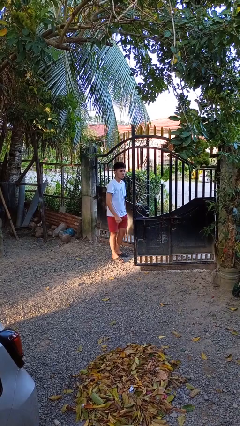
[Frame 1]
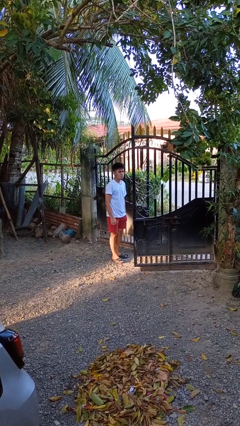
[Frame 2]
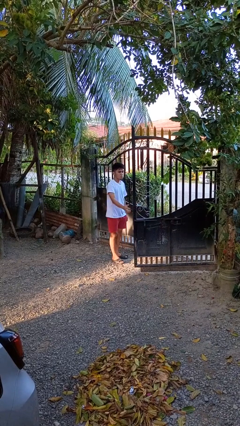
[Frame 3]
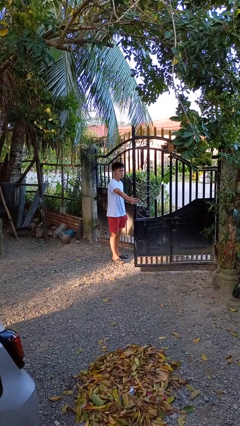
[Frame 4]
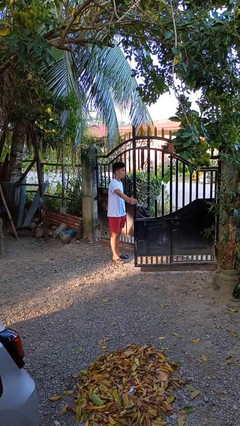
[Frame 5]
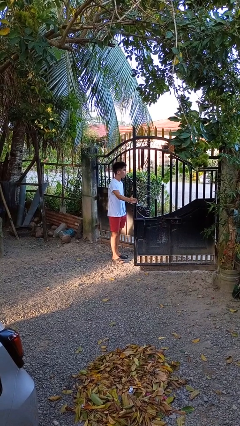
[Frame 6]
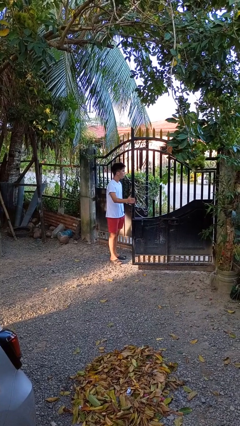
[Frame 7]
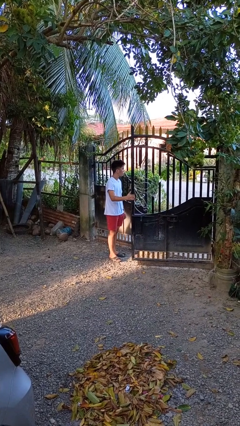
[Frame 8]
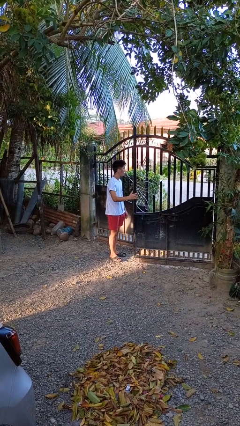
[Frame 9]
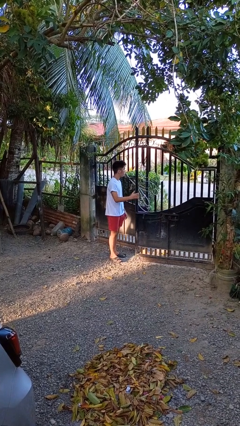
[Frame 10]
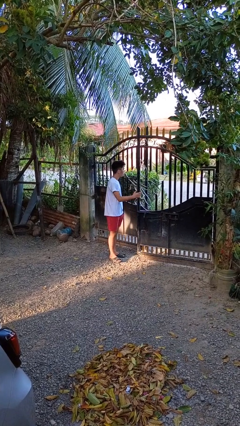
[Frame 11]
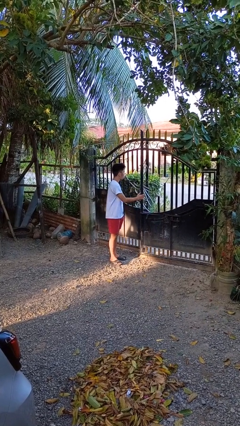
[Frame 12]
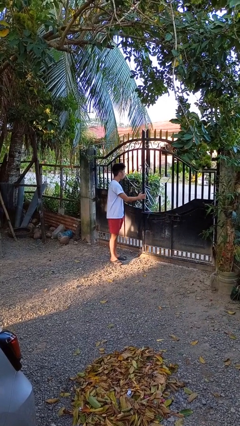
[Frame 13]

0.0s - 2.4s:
person closes gate

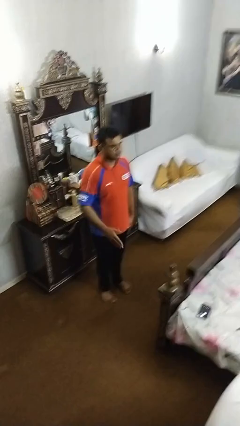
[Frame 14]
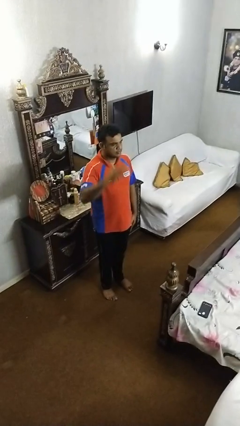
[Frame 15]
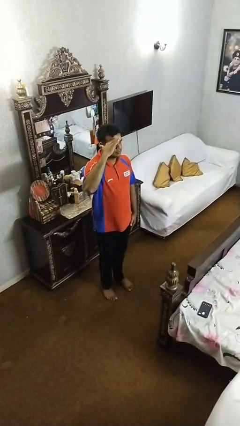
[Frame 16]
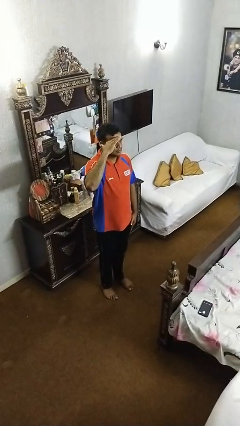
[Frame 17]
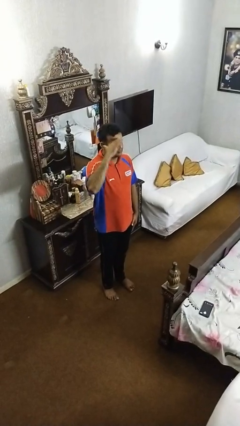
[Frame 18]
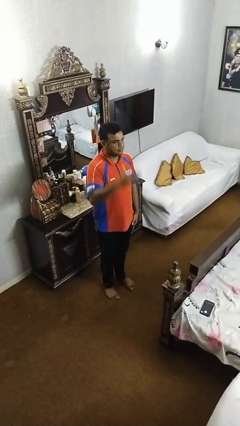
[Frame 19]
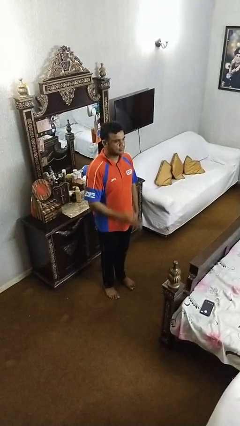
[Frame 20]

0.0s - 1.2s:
person salutes

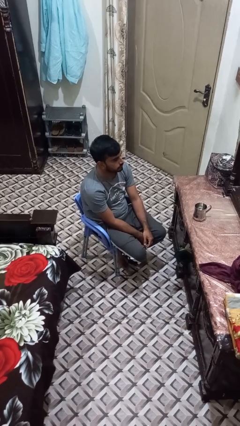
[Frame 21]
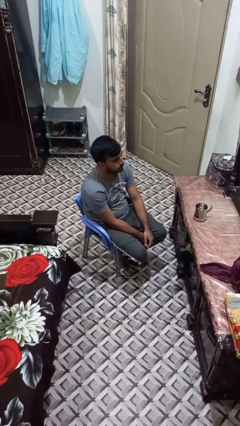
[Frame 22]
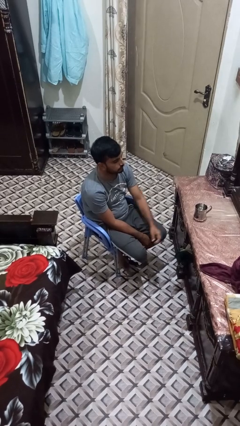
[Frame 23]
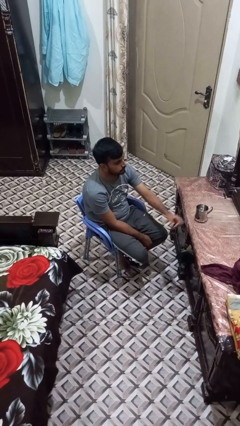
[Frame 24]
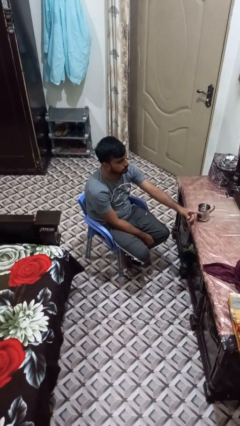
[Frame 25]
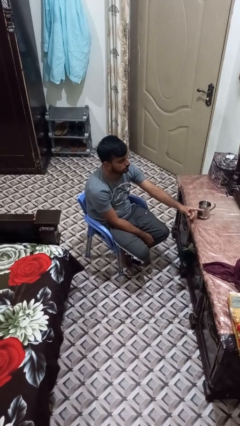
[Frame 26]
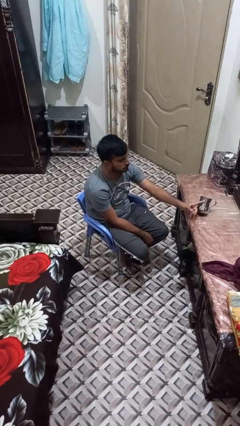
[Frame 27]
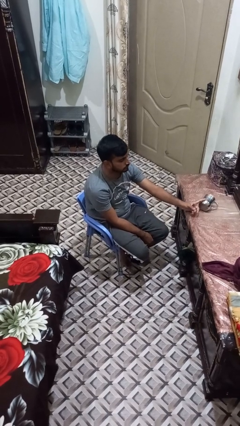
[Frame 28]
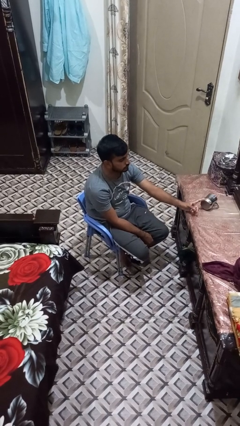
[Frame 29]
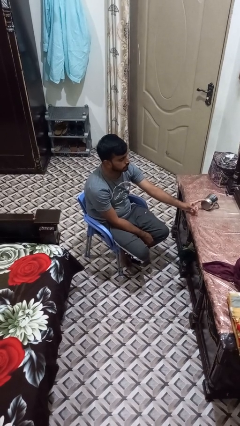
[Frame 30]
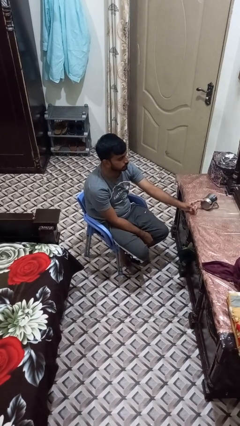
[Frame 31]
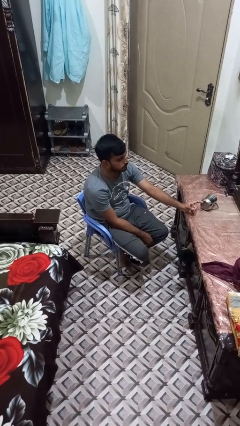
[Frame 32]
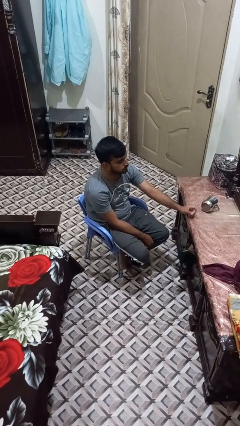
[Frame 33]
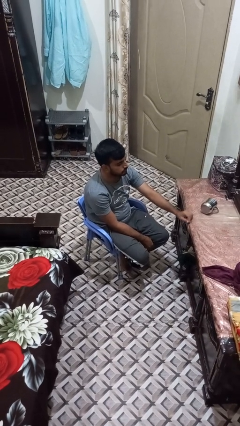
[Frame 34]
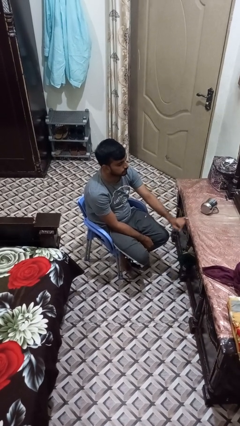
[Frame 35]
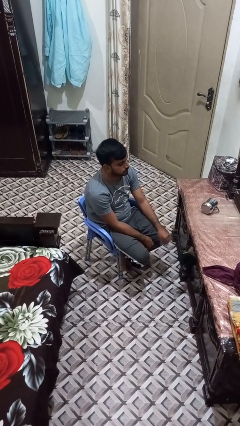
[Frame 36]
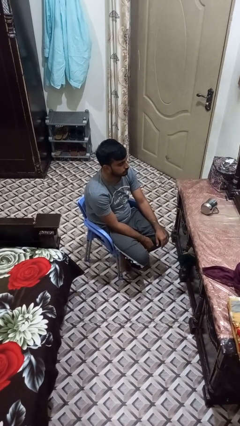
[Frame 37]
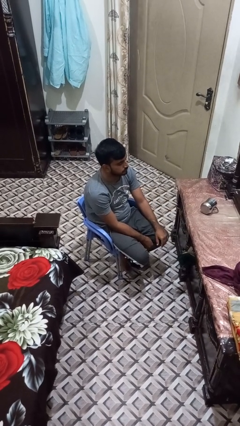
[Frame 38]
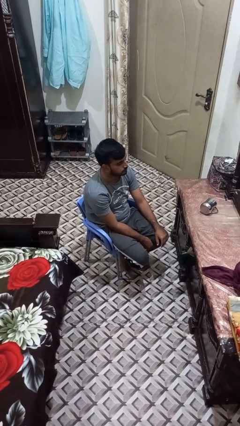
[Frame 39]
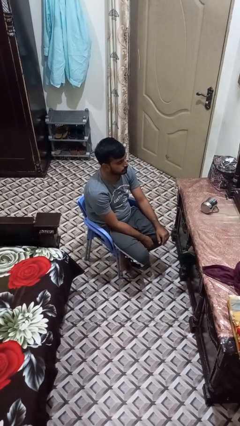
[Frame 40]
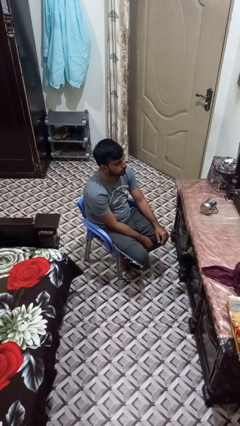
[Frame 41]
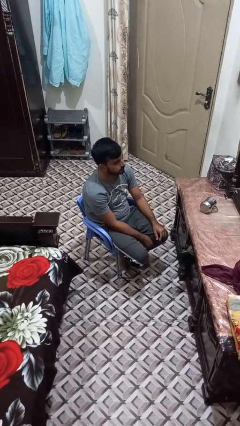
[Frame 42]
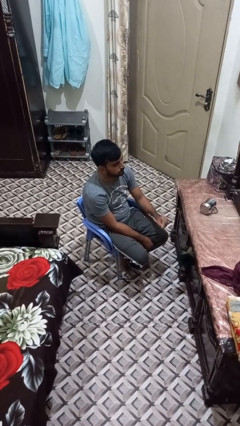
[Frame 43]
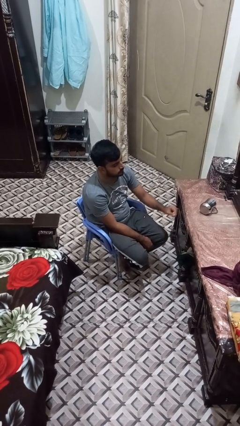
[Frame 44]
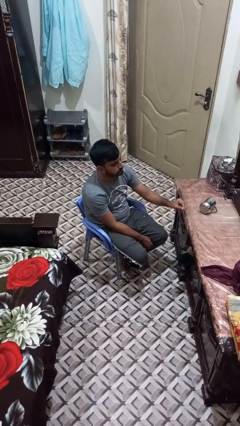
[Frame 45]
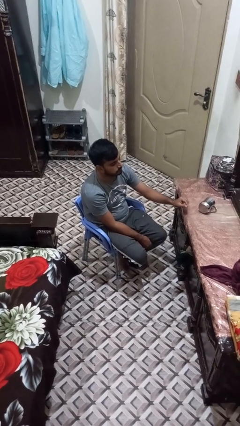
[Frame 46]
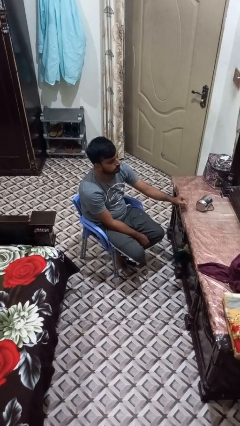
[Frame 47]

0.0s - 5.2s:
person knocks over glass

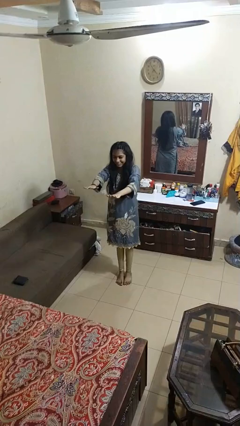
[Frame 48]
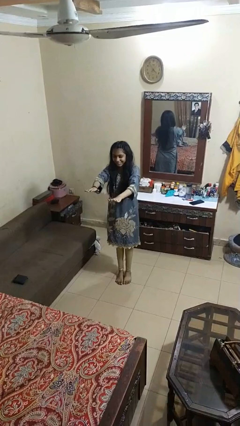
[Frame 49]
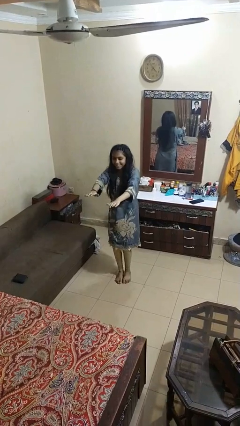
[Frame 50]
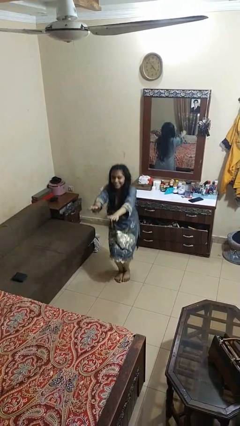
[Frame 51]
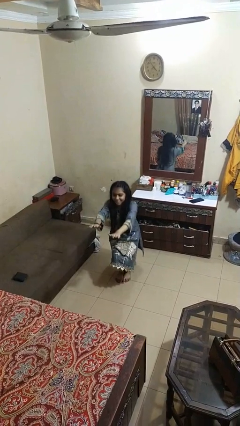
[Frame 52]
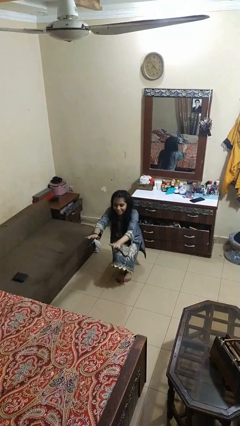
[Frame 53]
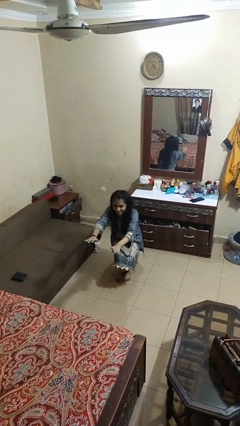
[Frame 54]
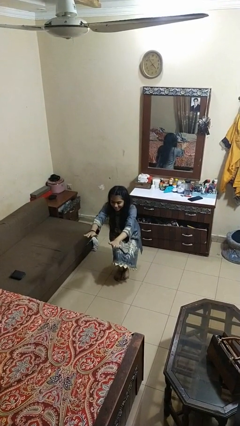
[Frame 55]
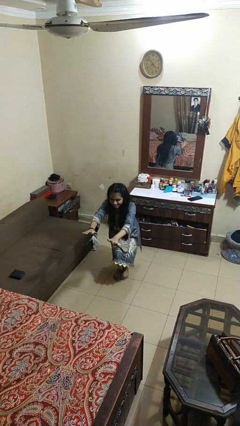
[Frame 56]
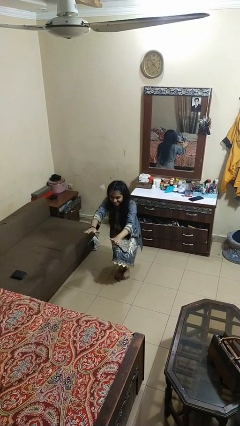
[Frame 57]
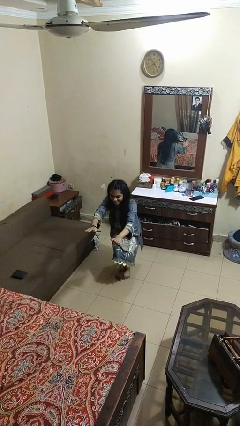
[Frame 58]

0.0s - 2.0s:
person squats

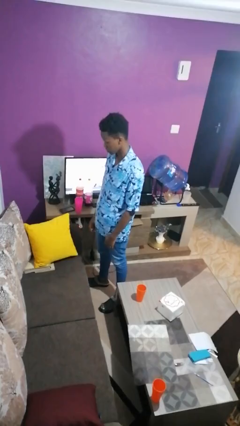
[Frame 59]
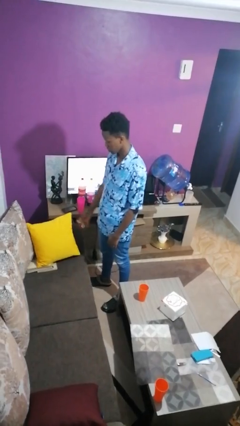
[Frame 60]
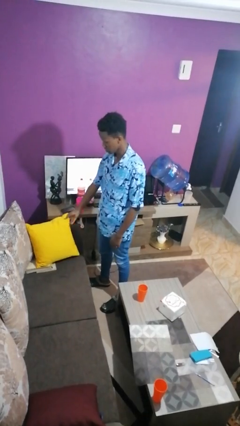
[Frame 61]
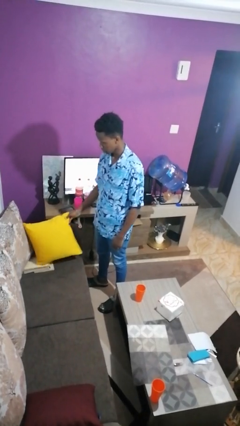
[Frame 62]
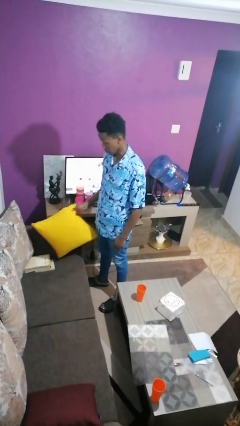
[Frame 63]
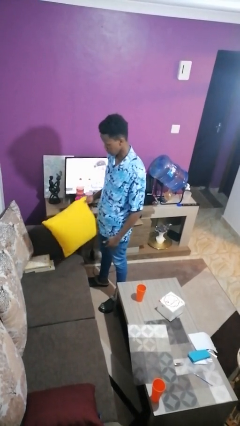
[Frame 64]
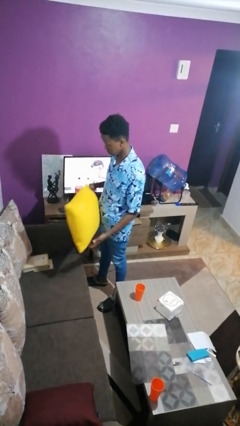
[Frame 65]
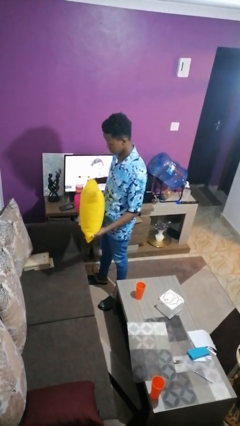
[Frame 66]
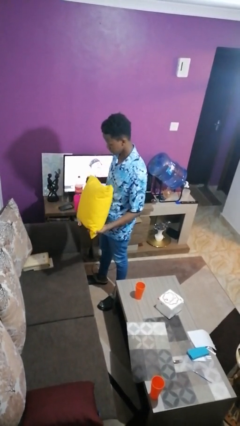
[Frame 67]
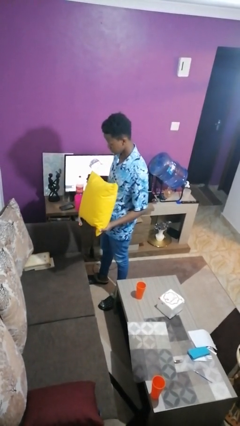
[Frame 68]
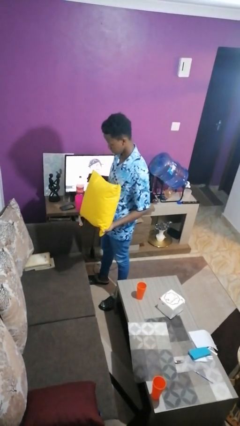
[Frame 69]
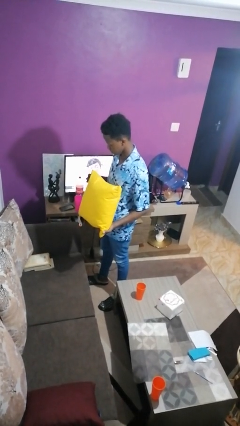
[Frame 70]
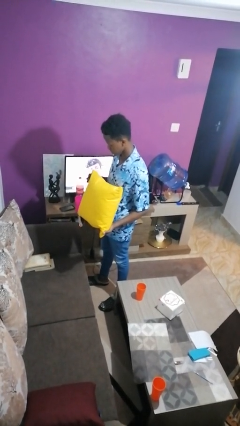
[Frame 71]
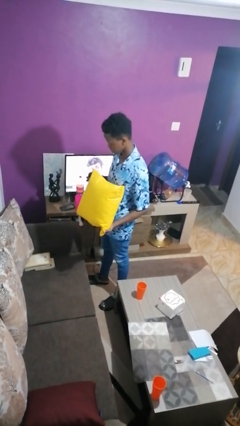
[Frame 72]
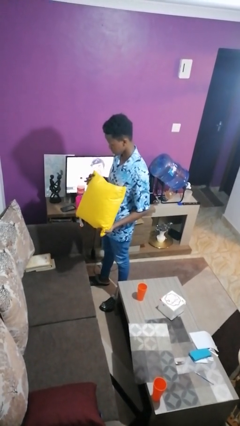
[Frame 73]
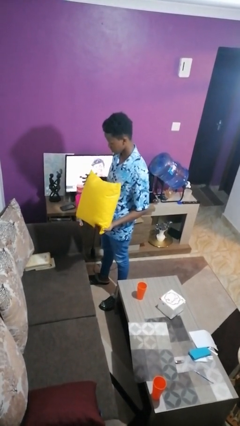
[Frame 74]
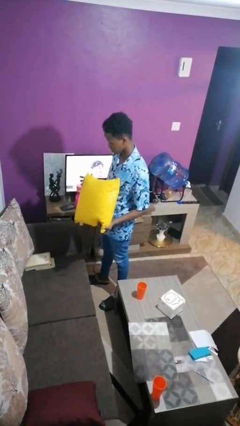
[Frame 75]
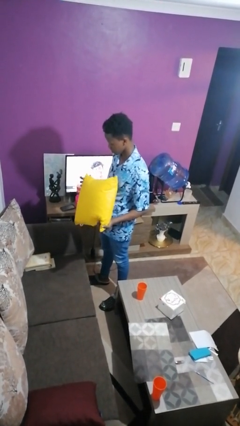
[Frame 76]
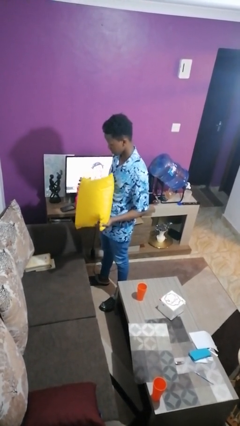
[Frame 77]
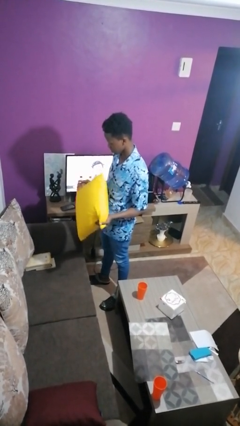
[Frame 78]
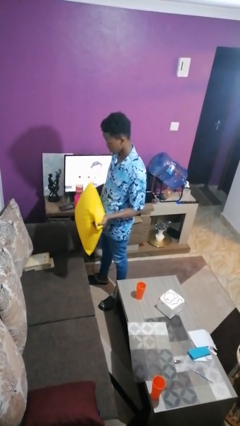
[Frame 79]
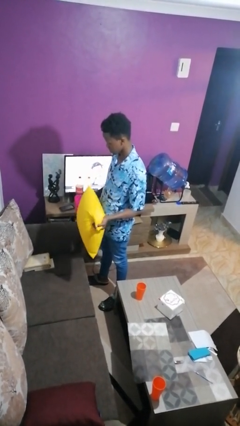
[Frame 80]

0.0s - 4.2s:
person picks up object from couch

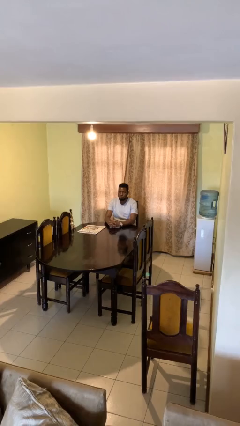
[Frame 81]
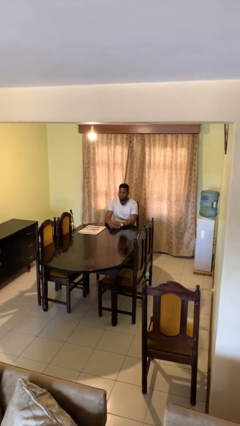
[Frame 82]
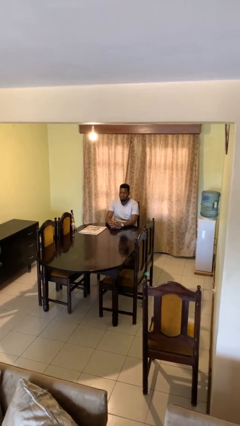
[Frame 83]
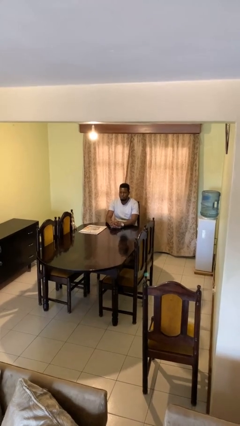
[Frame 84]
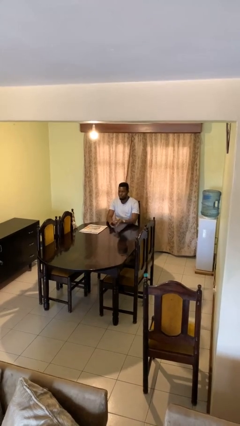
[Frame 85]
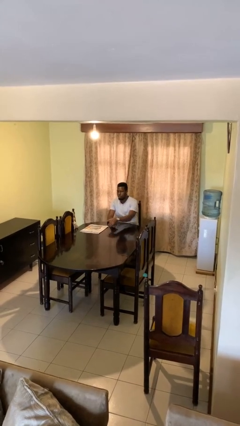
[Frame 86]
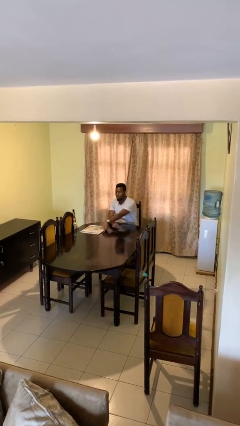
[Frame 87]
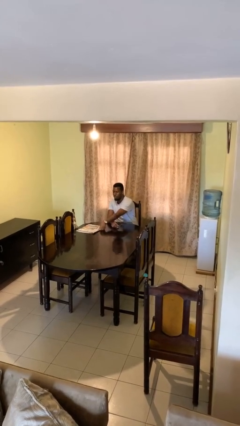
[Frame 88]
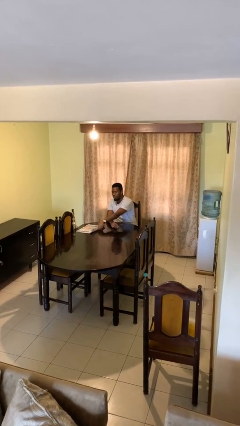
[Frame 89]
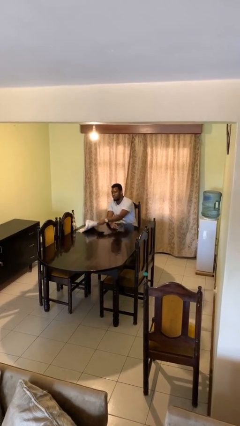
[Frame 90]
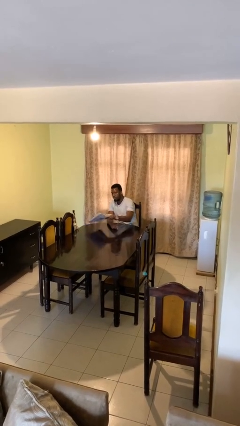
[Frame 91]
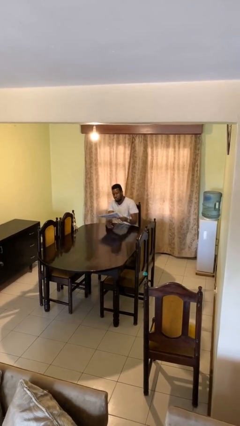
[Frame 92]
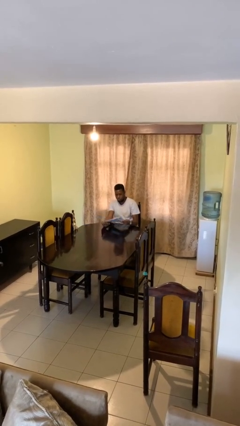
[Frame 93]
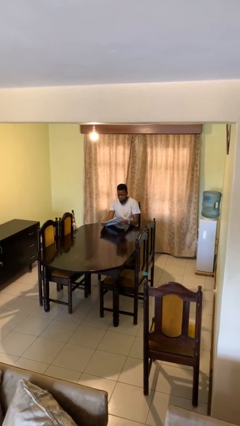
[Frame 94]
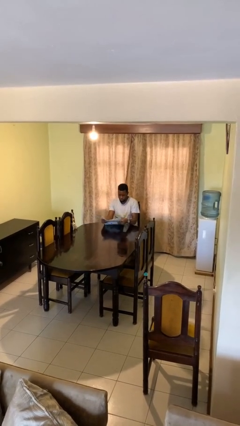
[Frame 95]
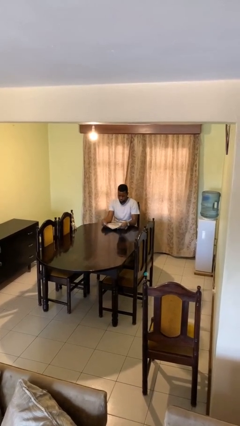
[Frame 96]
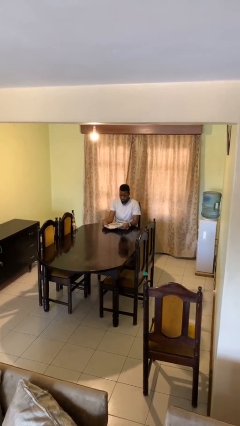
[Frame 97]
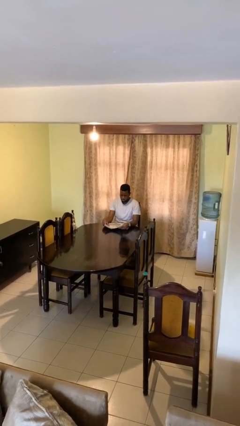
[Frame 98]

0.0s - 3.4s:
person picks up object from table
